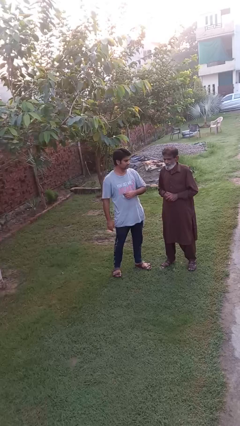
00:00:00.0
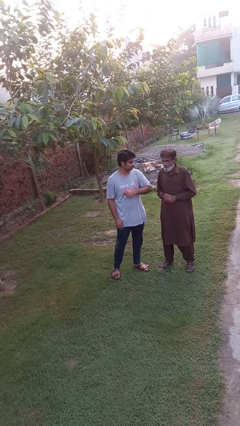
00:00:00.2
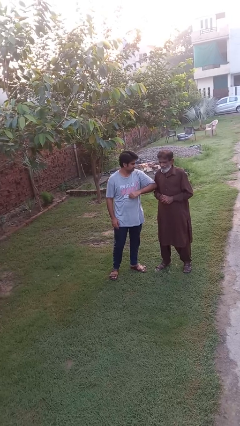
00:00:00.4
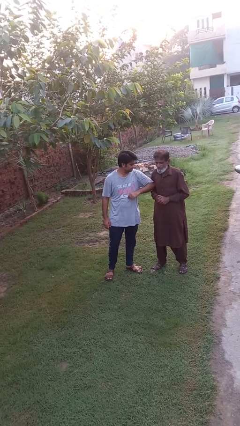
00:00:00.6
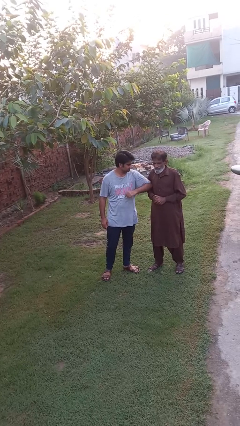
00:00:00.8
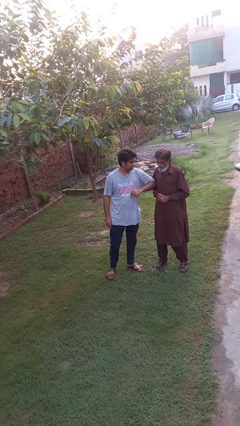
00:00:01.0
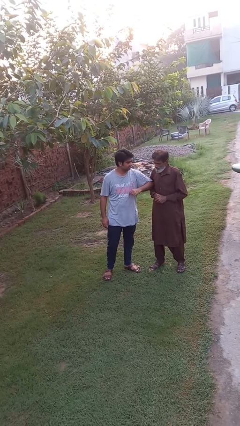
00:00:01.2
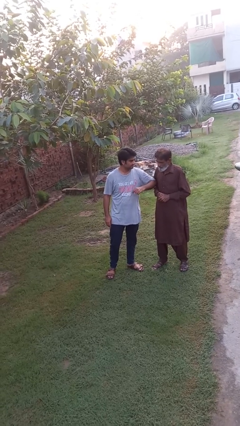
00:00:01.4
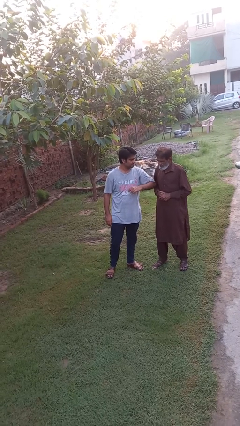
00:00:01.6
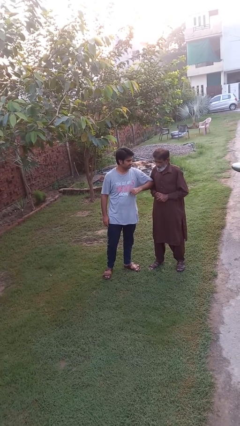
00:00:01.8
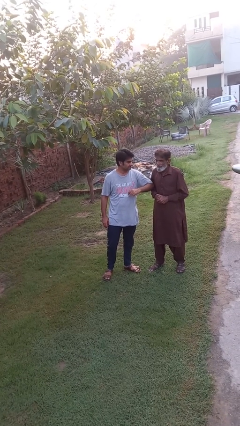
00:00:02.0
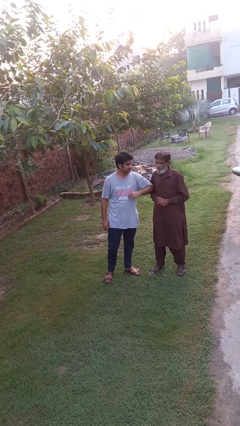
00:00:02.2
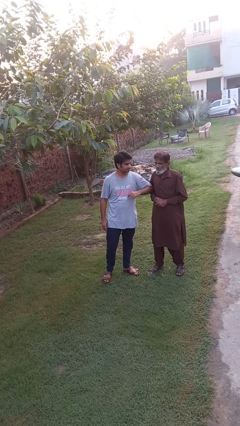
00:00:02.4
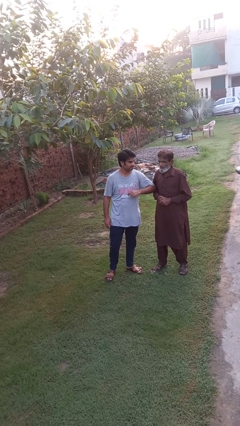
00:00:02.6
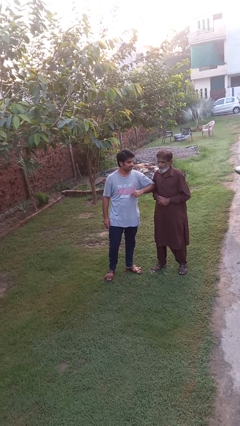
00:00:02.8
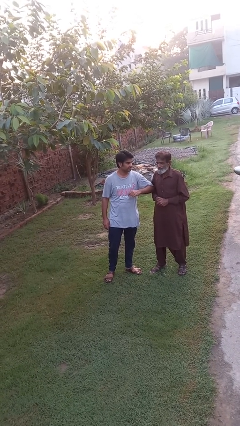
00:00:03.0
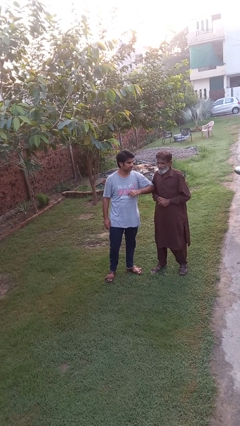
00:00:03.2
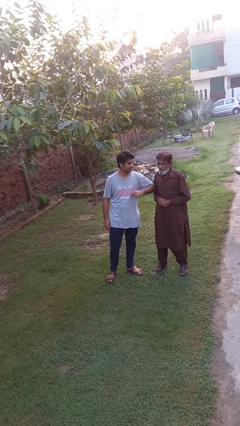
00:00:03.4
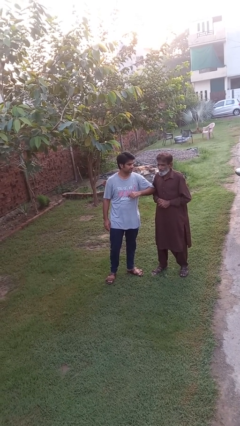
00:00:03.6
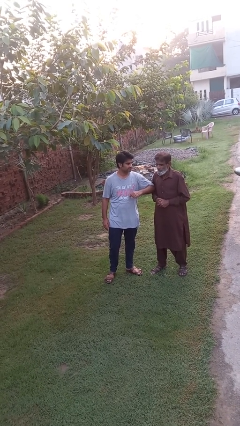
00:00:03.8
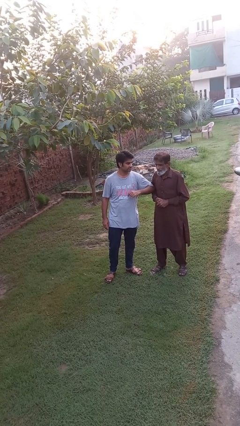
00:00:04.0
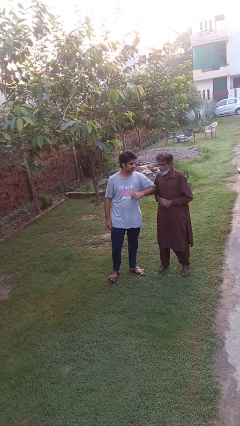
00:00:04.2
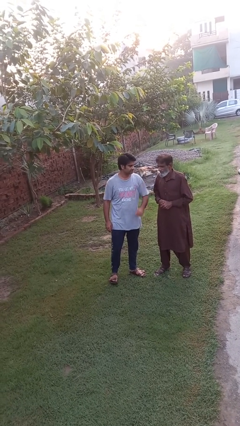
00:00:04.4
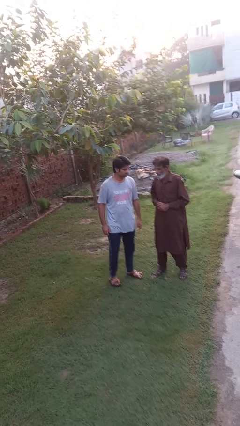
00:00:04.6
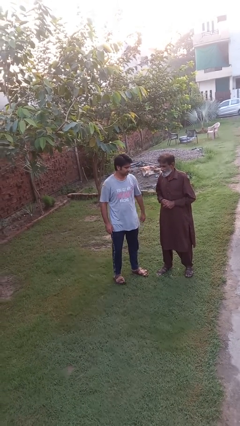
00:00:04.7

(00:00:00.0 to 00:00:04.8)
person nudges person with elbow

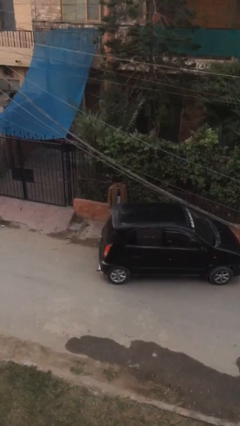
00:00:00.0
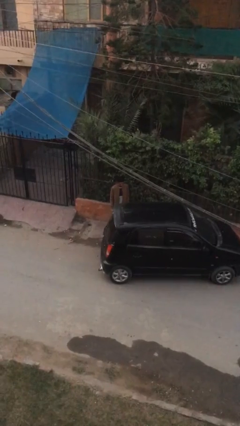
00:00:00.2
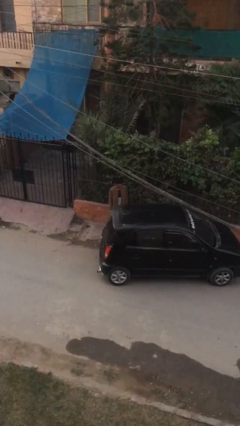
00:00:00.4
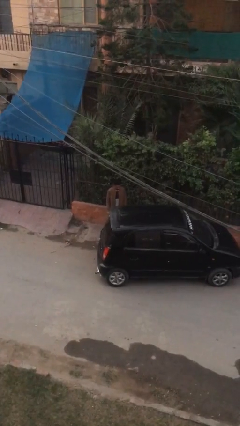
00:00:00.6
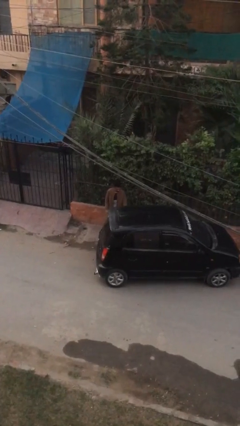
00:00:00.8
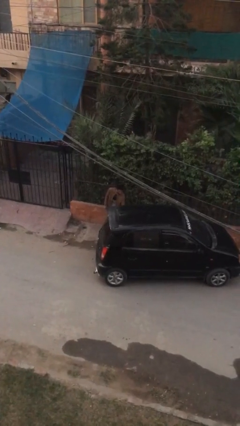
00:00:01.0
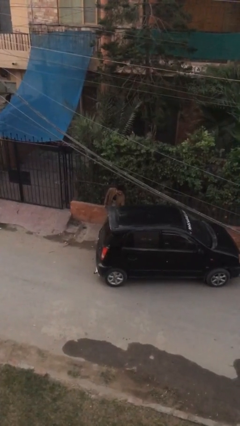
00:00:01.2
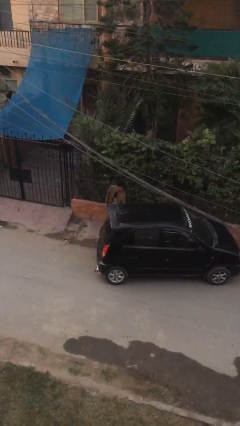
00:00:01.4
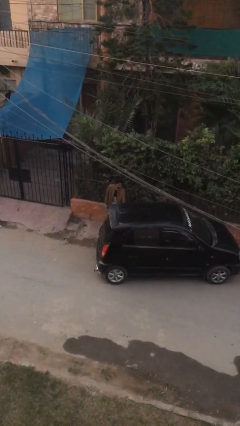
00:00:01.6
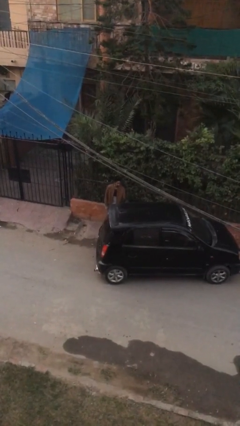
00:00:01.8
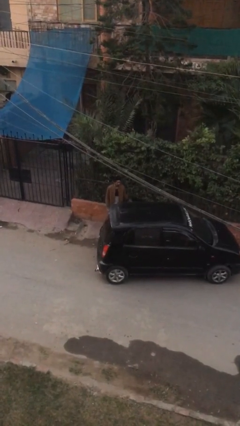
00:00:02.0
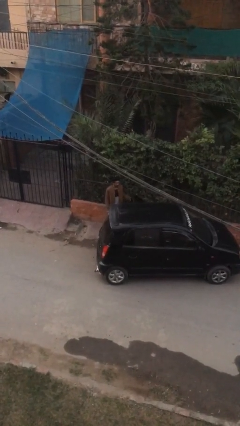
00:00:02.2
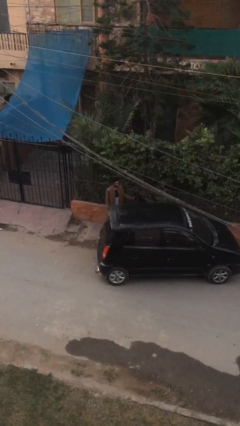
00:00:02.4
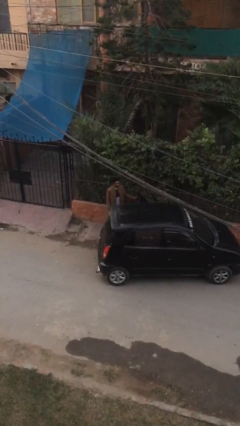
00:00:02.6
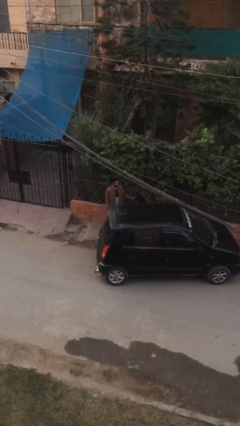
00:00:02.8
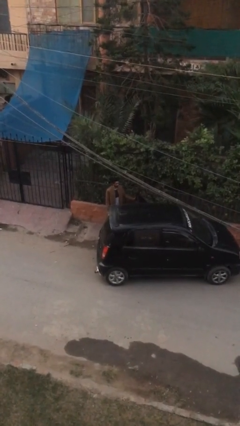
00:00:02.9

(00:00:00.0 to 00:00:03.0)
person opens car door

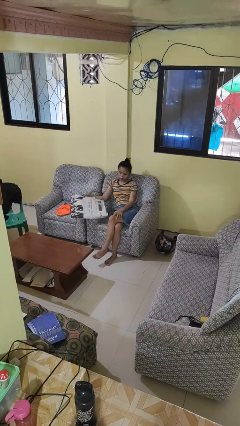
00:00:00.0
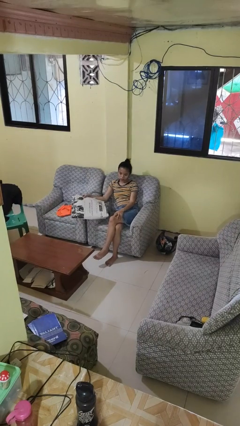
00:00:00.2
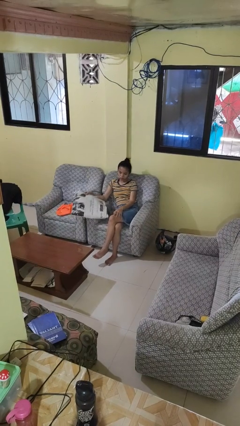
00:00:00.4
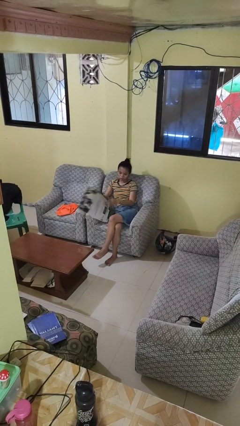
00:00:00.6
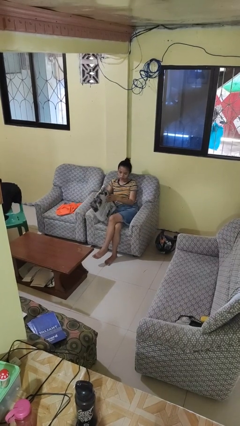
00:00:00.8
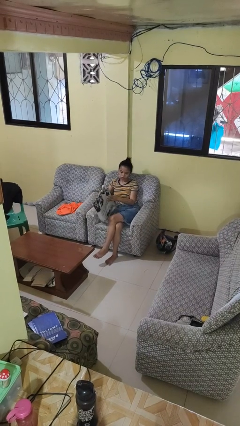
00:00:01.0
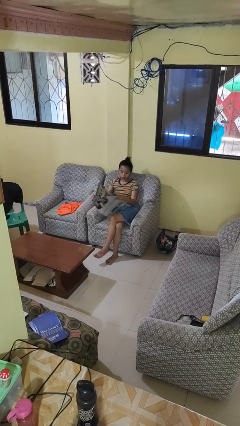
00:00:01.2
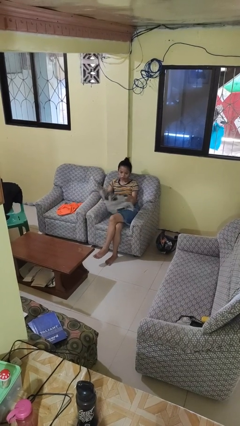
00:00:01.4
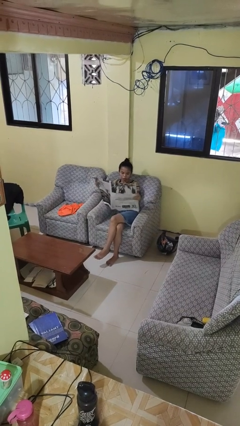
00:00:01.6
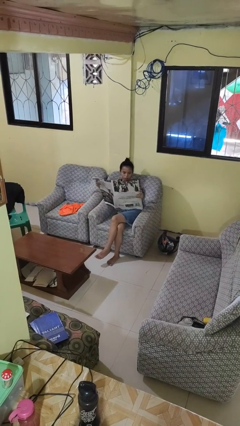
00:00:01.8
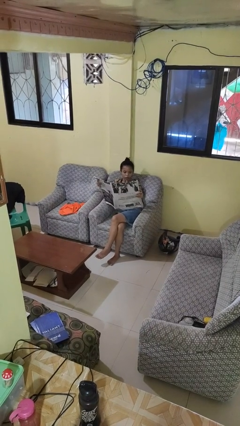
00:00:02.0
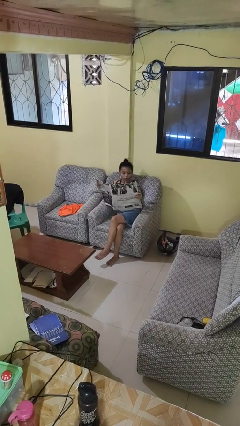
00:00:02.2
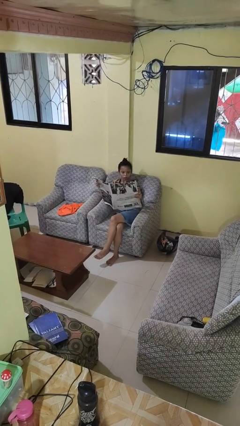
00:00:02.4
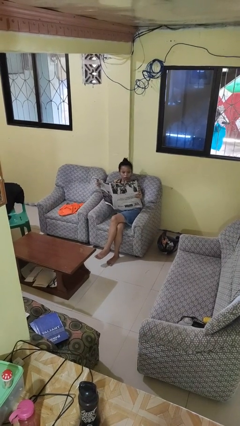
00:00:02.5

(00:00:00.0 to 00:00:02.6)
person reads newspaper

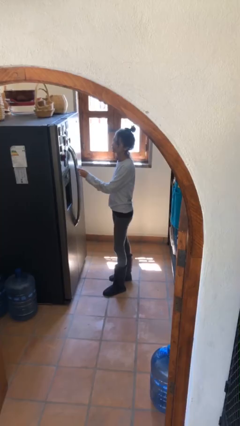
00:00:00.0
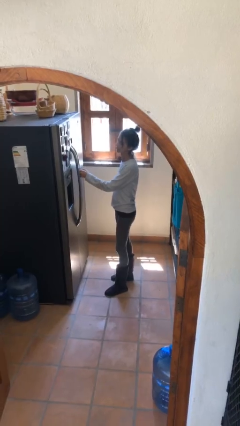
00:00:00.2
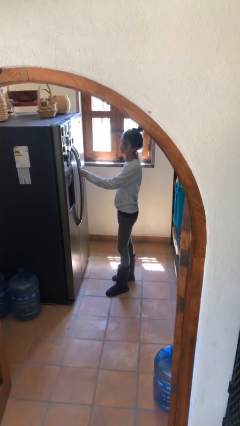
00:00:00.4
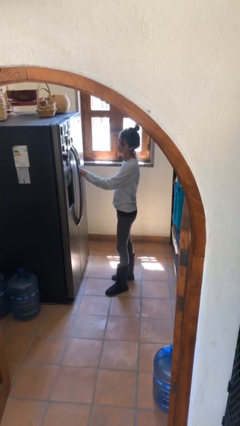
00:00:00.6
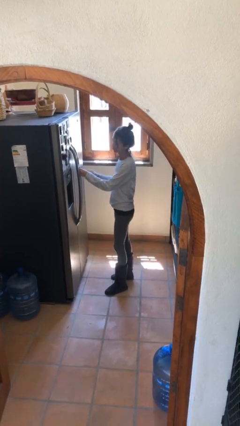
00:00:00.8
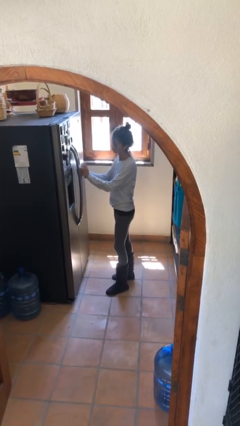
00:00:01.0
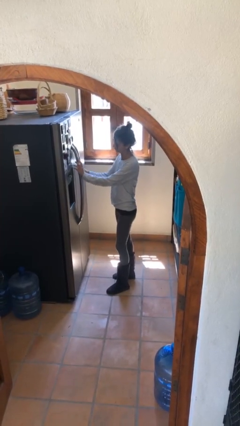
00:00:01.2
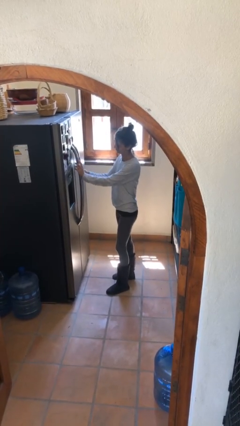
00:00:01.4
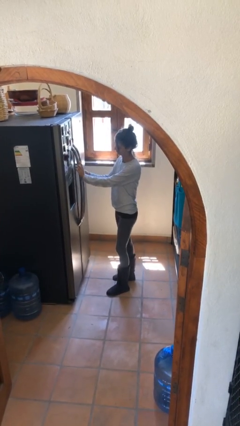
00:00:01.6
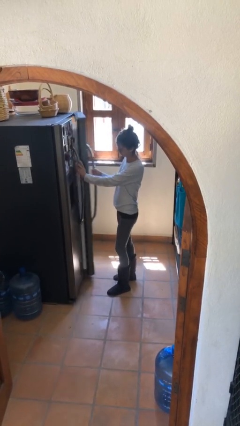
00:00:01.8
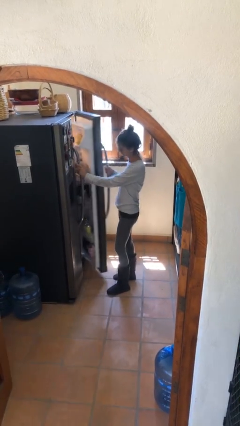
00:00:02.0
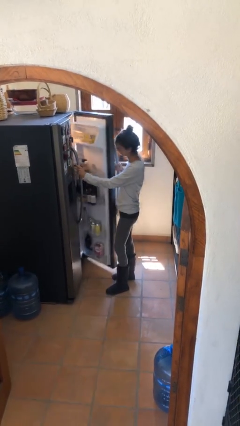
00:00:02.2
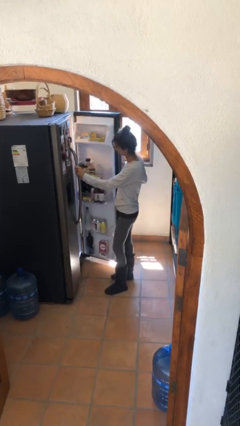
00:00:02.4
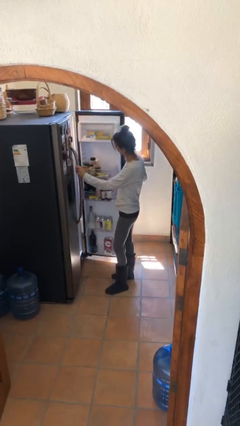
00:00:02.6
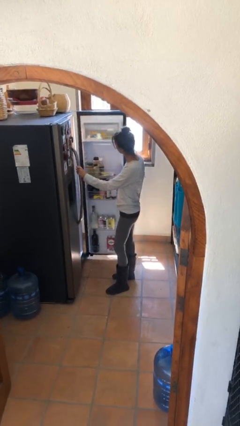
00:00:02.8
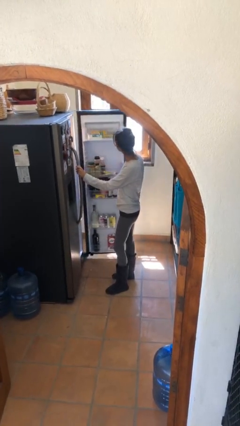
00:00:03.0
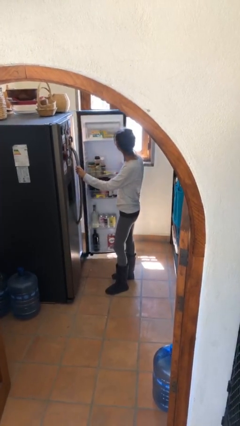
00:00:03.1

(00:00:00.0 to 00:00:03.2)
person opens refrigerator

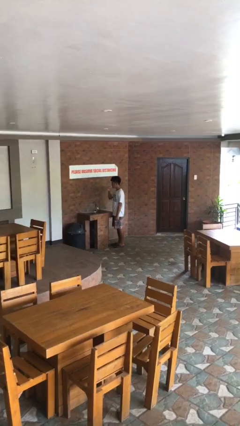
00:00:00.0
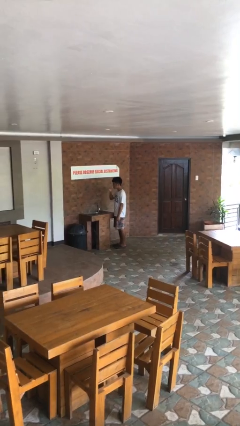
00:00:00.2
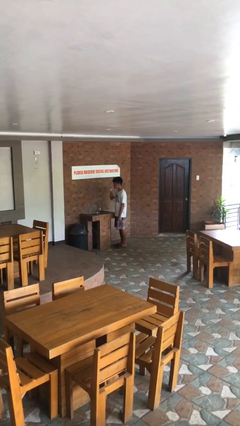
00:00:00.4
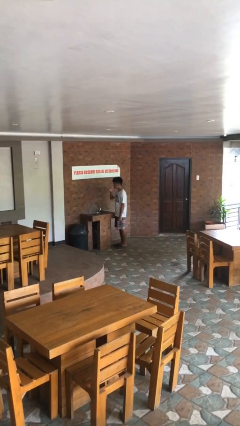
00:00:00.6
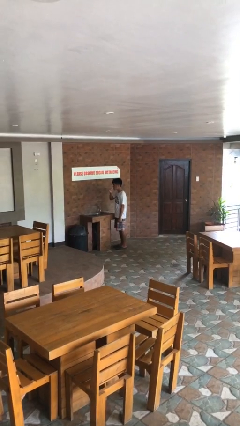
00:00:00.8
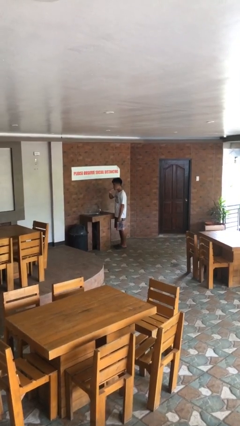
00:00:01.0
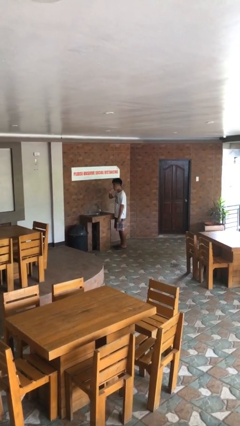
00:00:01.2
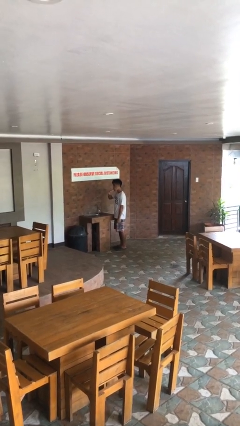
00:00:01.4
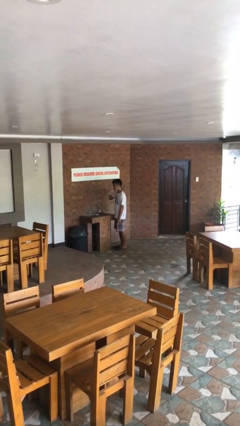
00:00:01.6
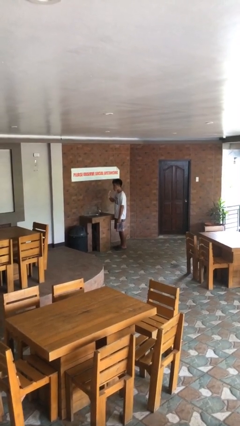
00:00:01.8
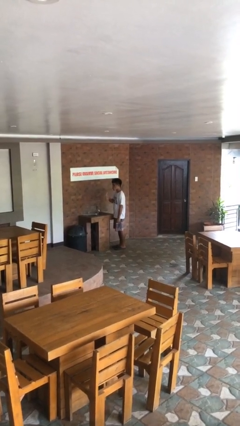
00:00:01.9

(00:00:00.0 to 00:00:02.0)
person brushes teeth

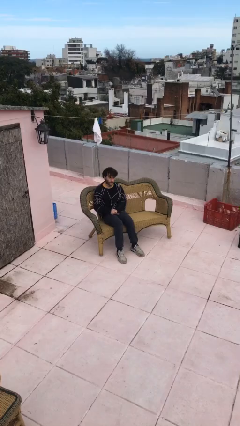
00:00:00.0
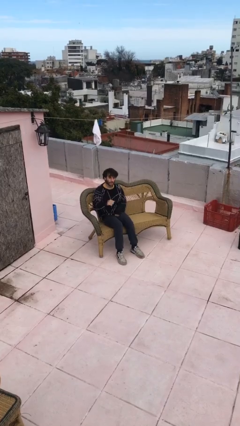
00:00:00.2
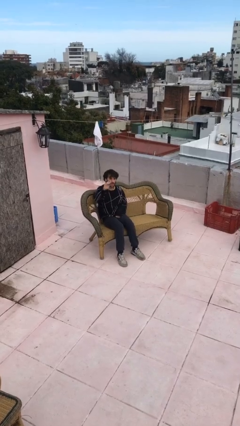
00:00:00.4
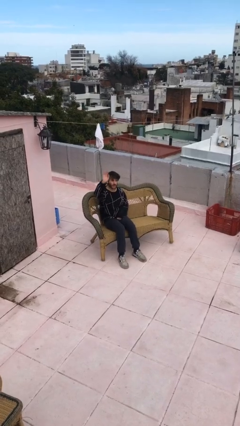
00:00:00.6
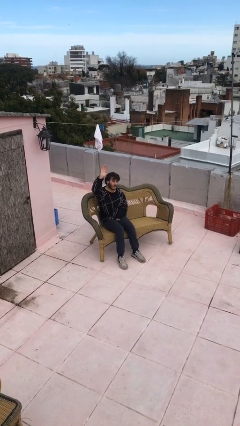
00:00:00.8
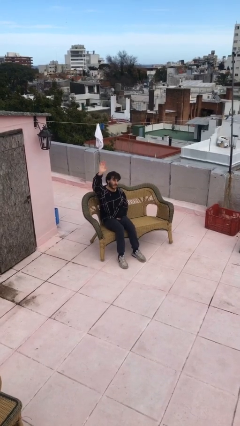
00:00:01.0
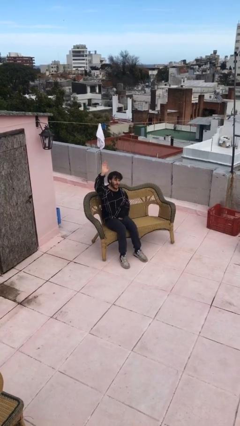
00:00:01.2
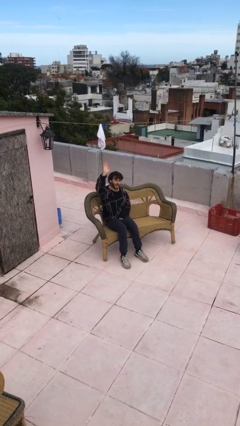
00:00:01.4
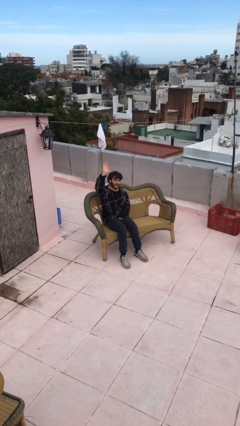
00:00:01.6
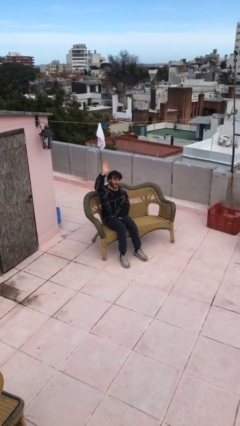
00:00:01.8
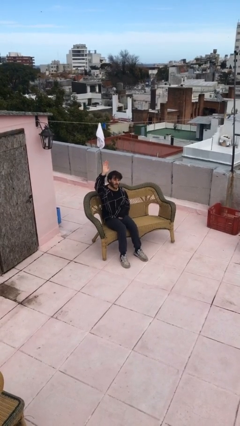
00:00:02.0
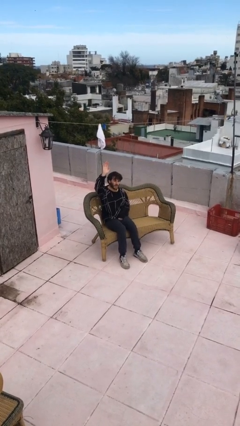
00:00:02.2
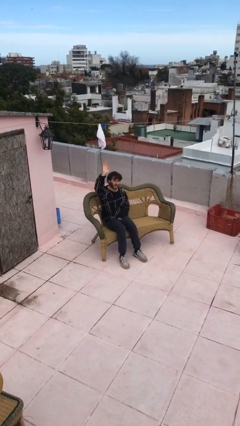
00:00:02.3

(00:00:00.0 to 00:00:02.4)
person gestures raise hand
